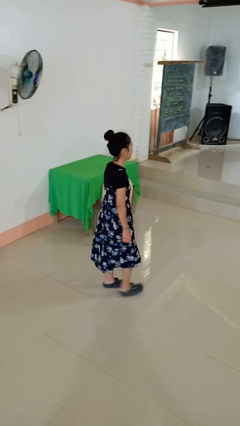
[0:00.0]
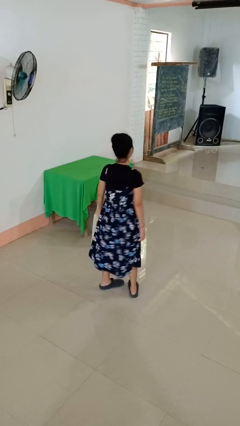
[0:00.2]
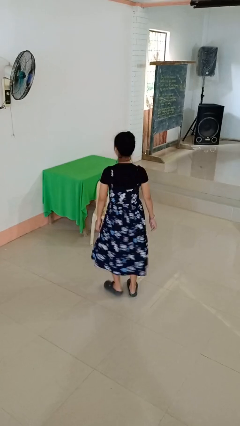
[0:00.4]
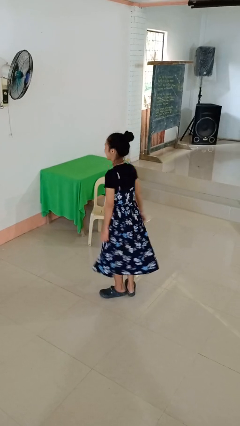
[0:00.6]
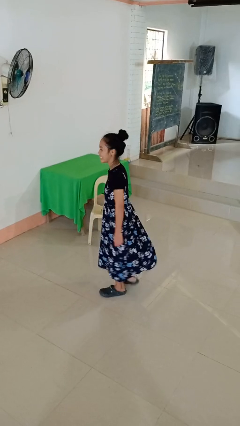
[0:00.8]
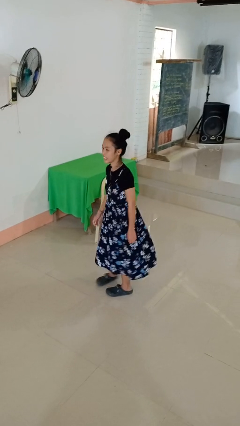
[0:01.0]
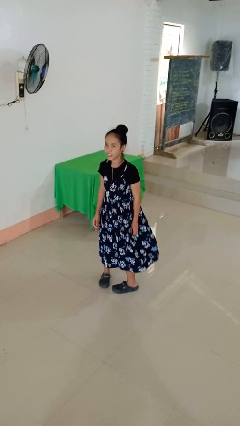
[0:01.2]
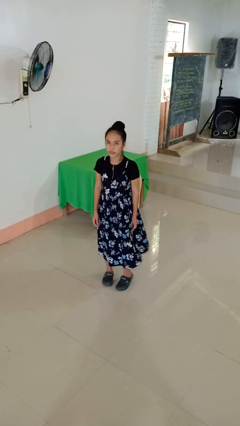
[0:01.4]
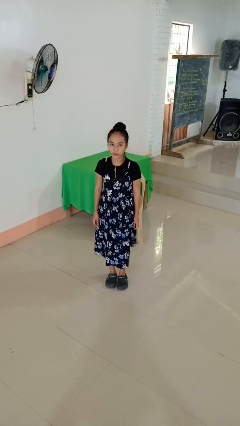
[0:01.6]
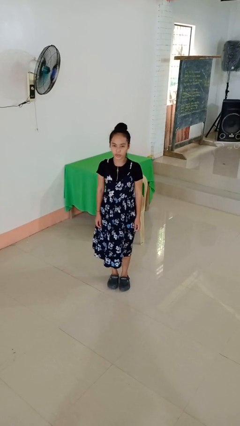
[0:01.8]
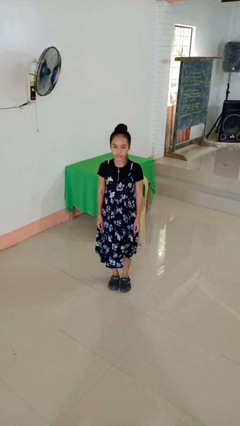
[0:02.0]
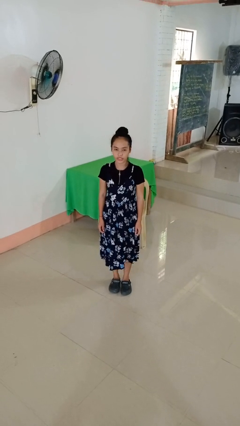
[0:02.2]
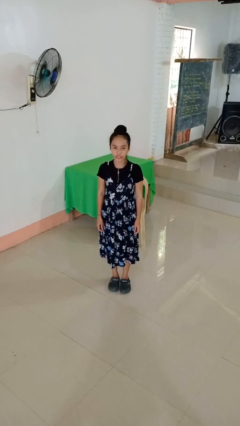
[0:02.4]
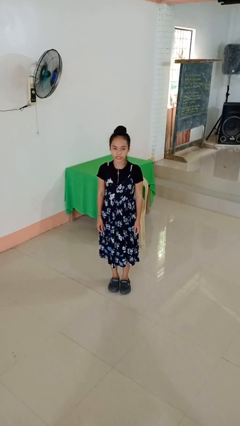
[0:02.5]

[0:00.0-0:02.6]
person twirls

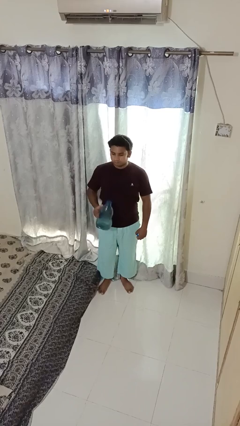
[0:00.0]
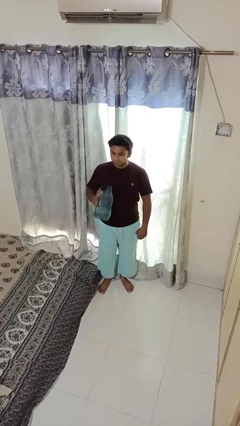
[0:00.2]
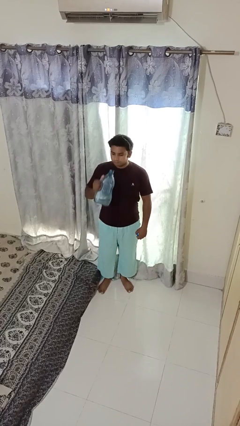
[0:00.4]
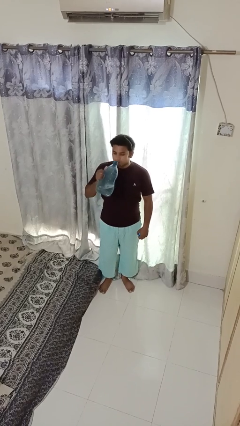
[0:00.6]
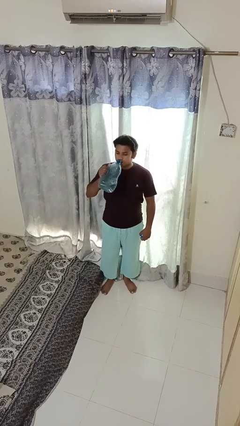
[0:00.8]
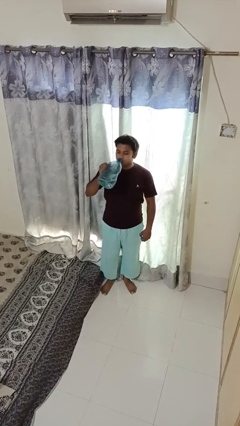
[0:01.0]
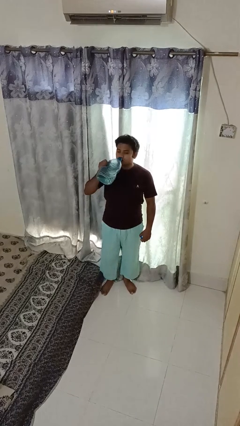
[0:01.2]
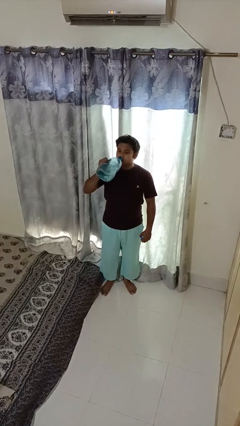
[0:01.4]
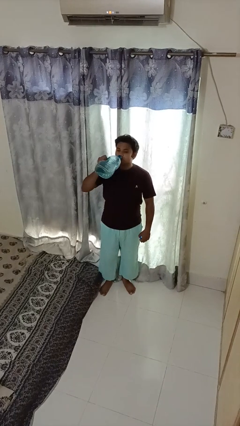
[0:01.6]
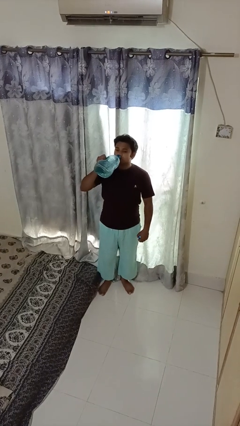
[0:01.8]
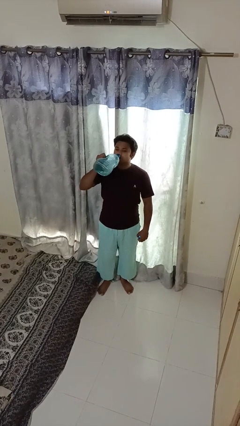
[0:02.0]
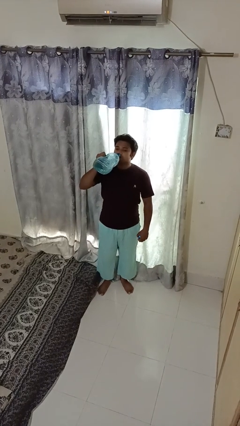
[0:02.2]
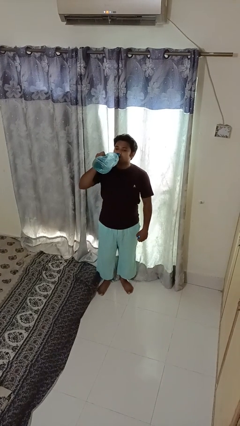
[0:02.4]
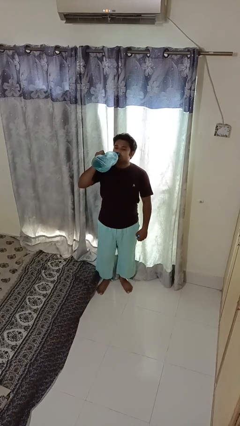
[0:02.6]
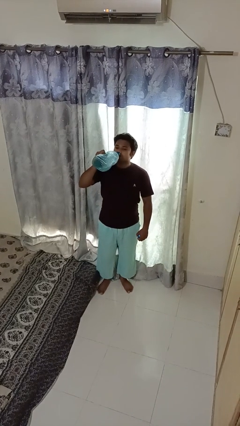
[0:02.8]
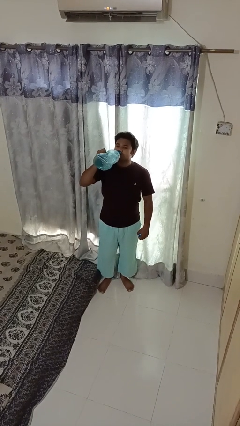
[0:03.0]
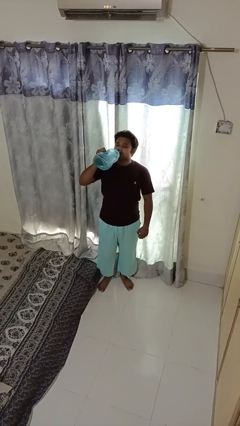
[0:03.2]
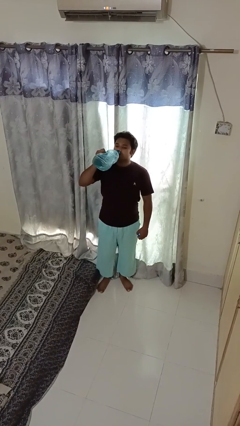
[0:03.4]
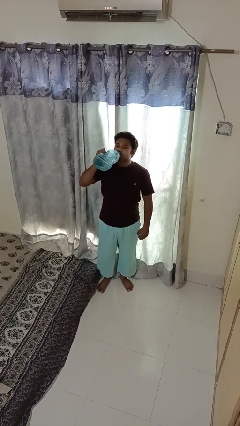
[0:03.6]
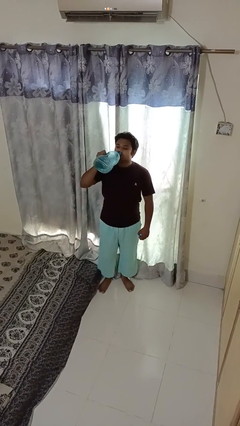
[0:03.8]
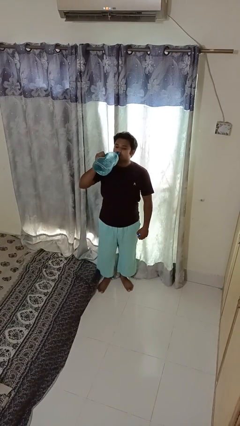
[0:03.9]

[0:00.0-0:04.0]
person drinks from bottle

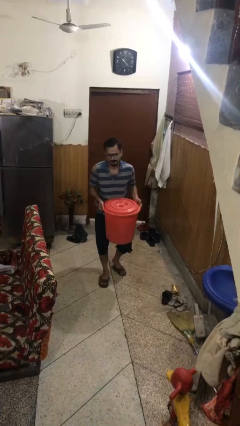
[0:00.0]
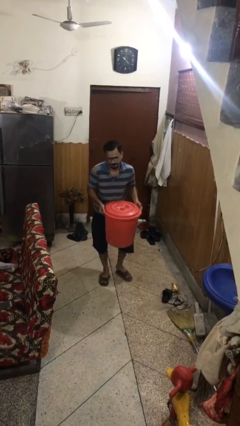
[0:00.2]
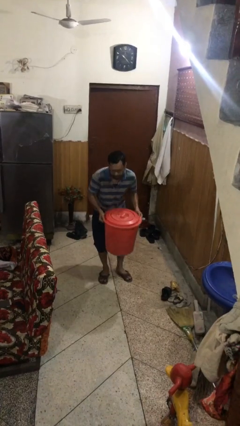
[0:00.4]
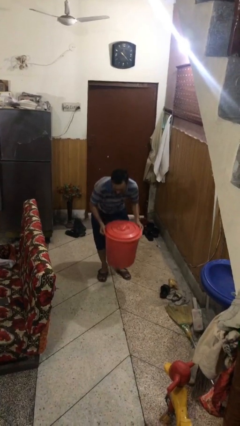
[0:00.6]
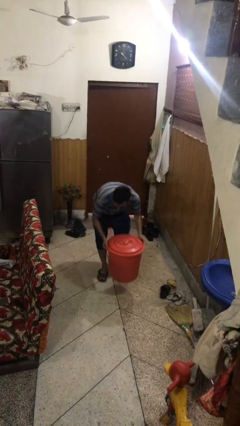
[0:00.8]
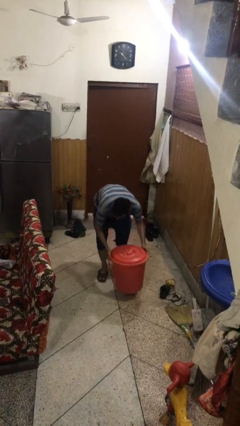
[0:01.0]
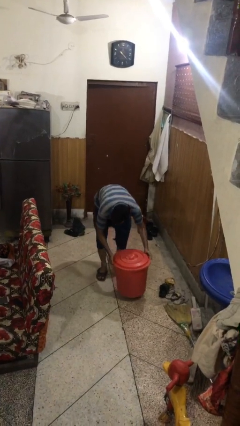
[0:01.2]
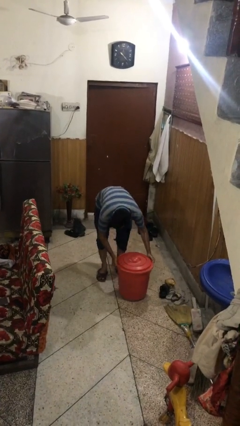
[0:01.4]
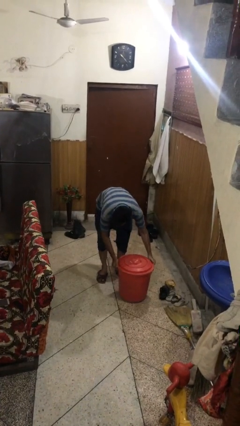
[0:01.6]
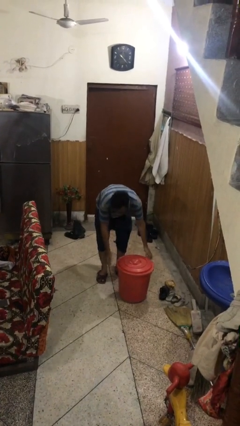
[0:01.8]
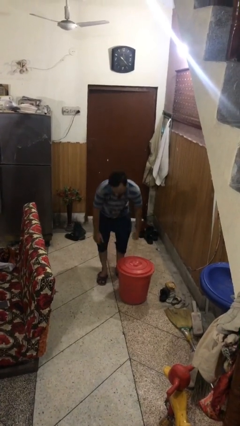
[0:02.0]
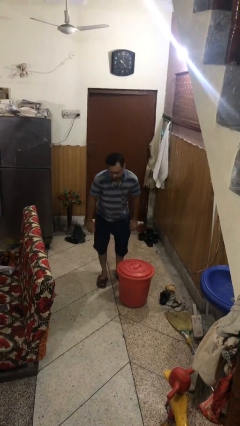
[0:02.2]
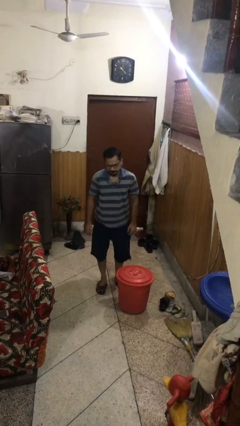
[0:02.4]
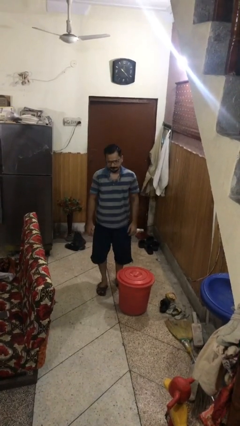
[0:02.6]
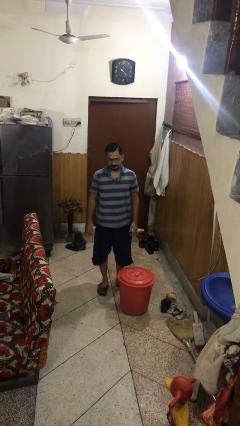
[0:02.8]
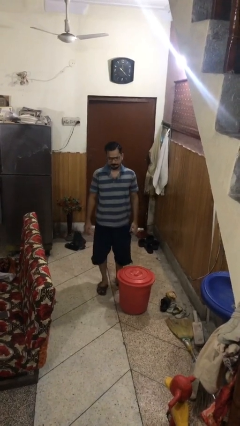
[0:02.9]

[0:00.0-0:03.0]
person puts down object on floor

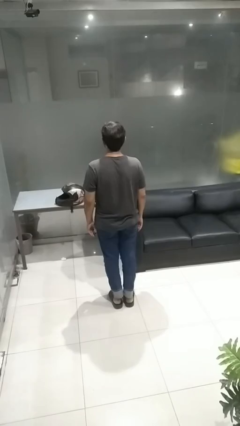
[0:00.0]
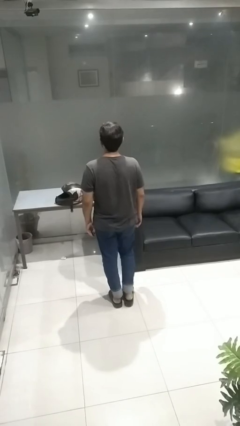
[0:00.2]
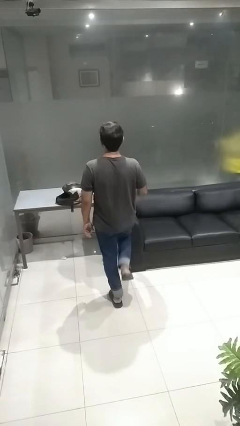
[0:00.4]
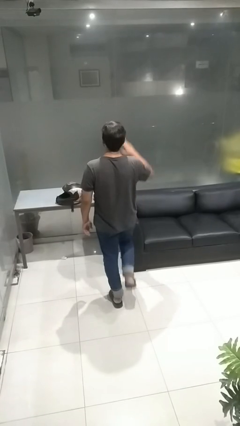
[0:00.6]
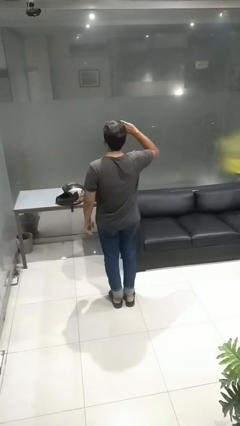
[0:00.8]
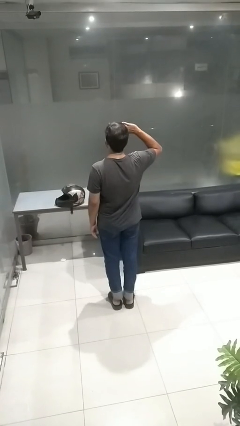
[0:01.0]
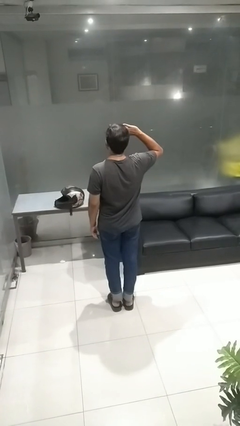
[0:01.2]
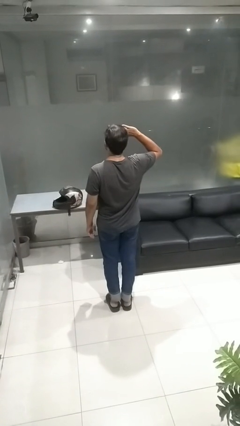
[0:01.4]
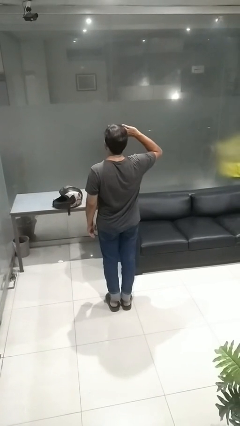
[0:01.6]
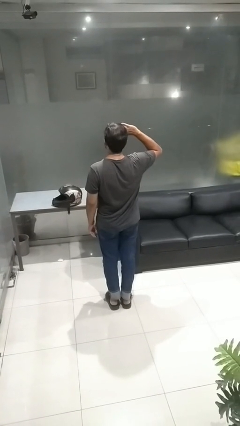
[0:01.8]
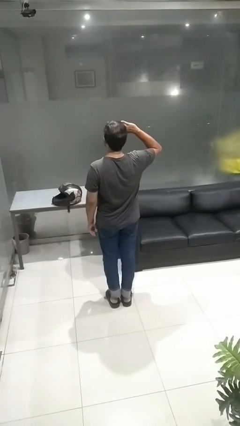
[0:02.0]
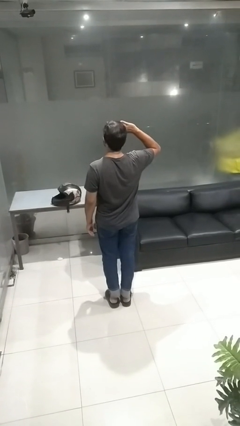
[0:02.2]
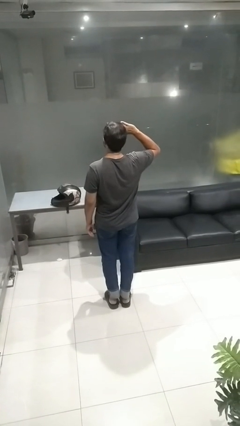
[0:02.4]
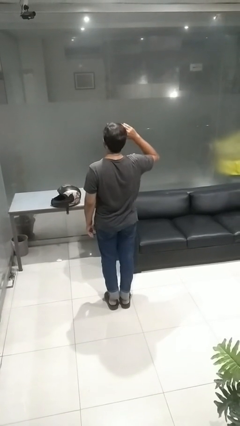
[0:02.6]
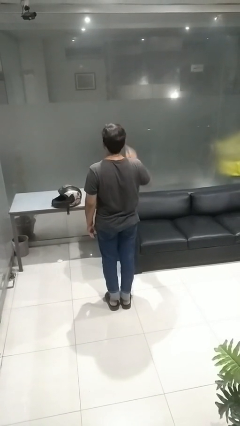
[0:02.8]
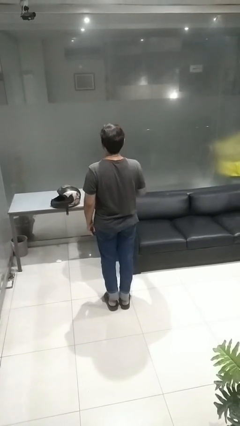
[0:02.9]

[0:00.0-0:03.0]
person salutes

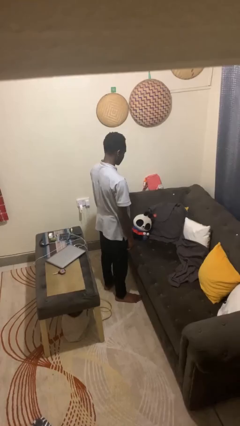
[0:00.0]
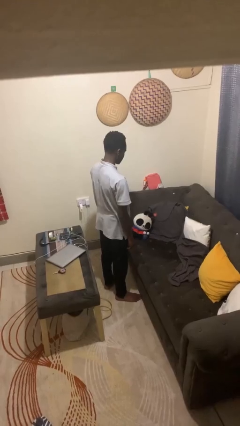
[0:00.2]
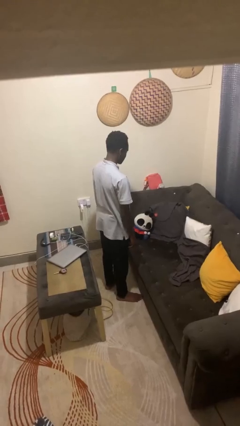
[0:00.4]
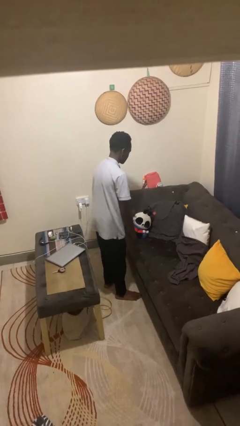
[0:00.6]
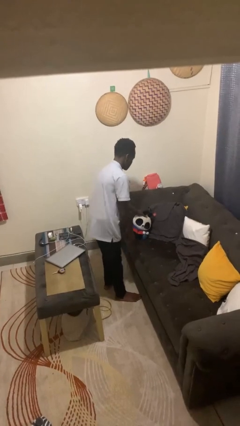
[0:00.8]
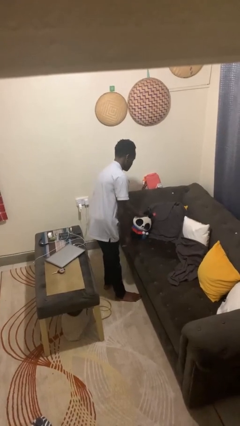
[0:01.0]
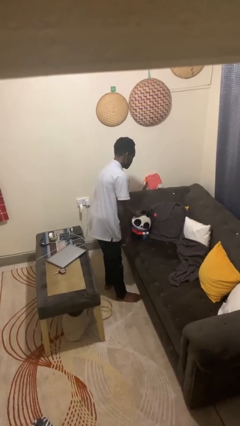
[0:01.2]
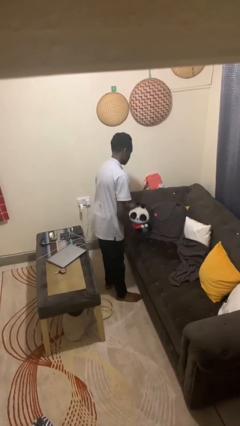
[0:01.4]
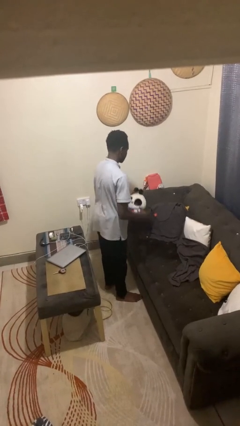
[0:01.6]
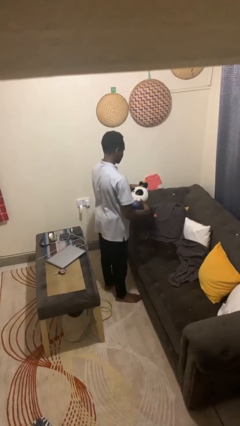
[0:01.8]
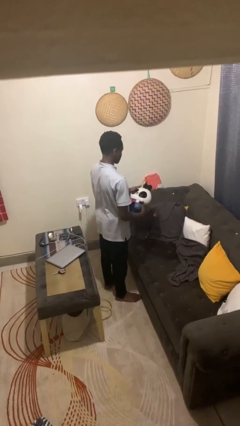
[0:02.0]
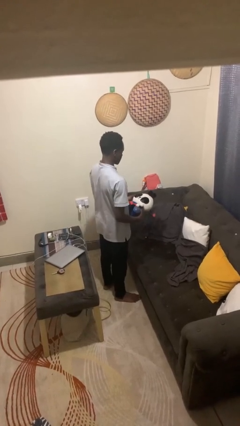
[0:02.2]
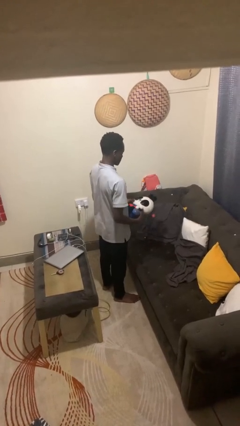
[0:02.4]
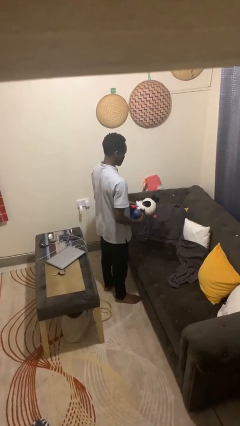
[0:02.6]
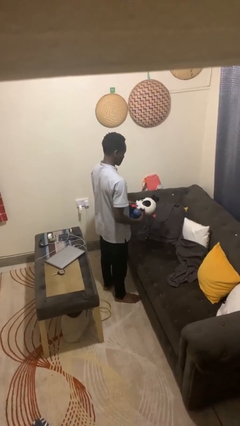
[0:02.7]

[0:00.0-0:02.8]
person picks up object from couch

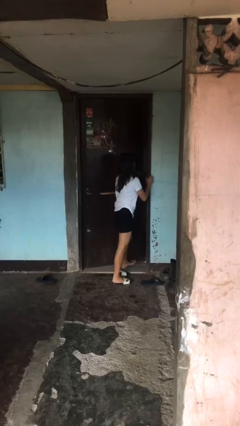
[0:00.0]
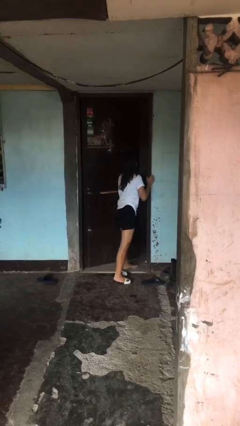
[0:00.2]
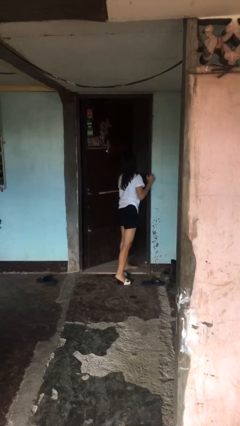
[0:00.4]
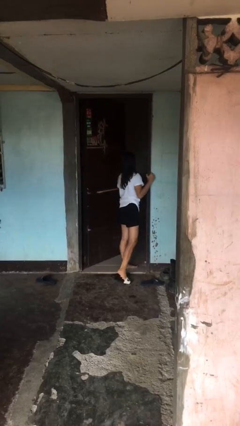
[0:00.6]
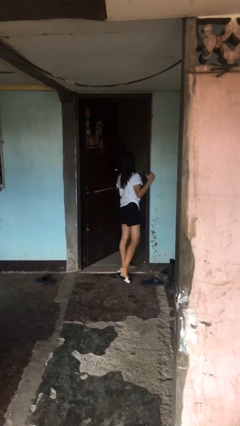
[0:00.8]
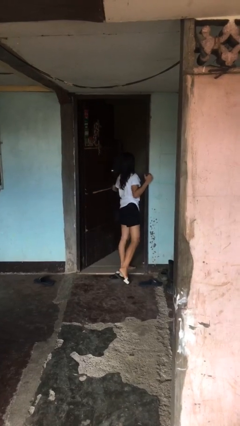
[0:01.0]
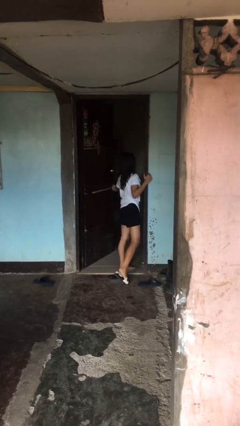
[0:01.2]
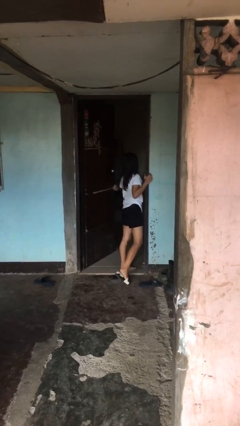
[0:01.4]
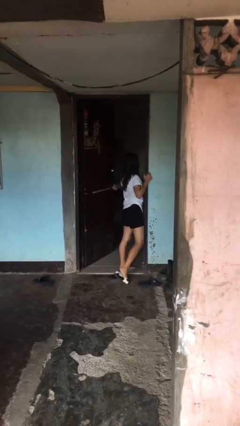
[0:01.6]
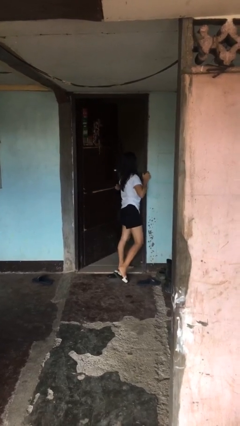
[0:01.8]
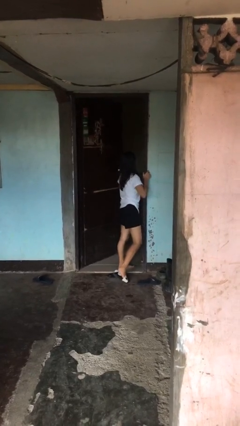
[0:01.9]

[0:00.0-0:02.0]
person opens facility door
